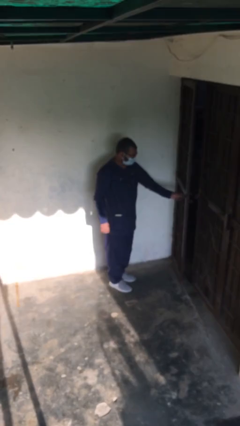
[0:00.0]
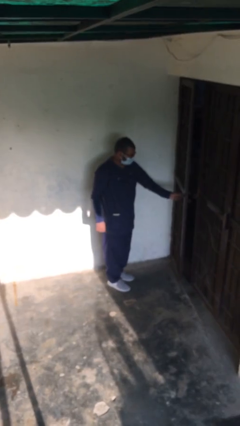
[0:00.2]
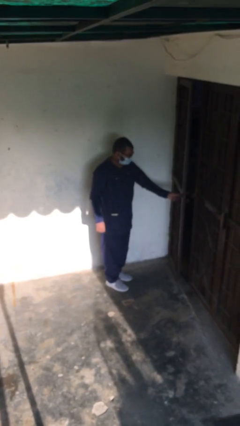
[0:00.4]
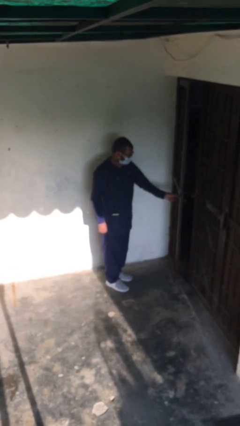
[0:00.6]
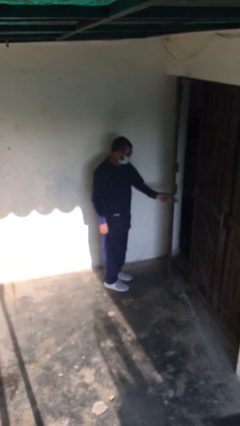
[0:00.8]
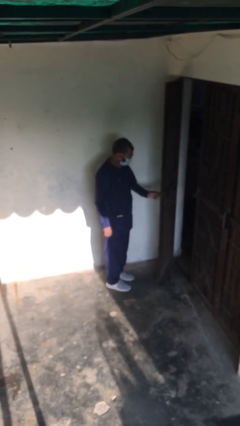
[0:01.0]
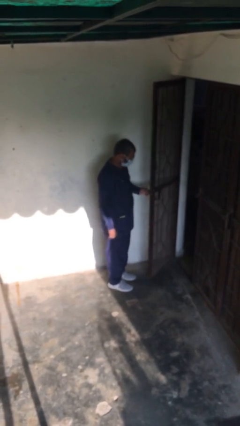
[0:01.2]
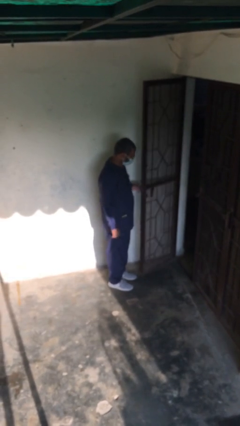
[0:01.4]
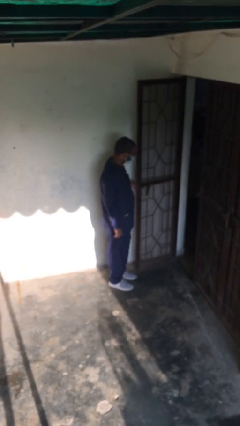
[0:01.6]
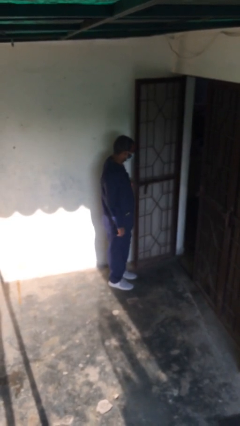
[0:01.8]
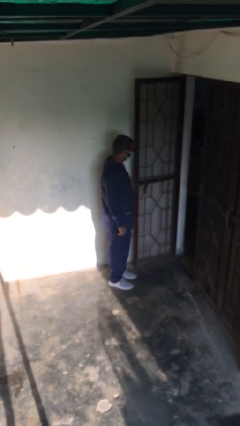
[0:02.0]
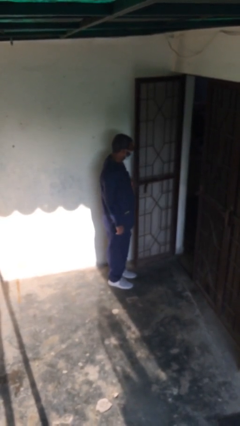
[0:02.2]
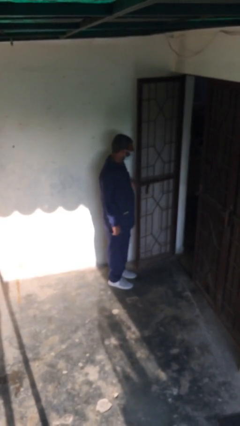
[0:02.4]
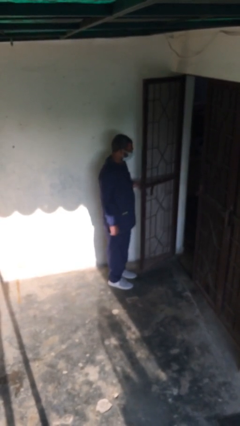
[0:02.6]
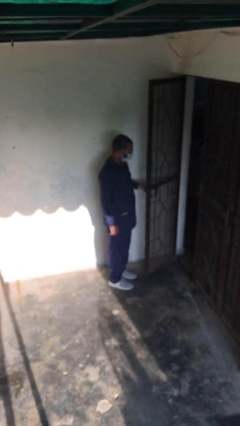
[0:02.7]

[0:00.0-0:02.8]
person opens facility door

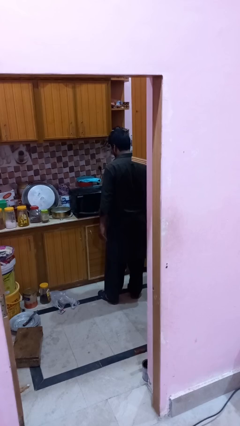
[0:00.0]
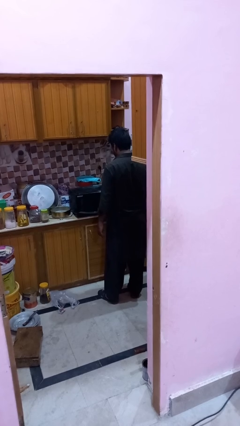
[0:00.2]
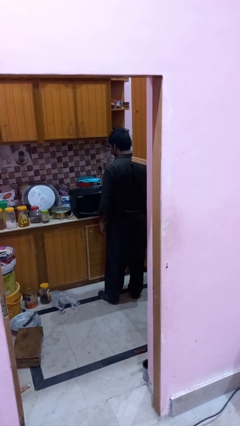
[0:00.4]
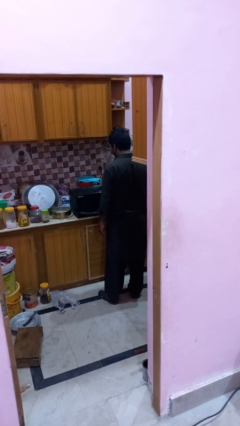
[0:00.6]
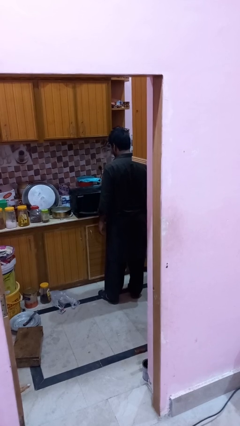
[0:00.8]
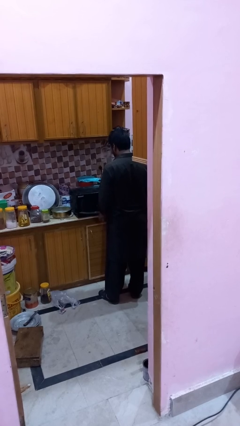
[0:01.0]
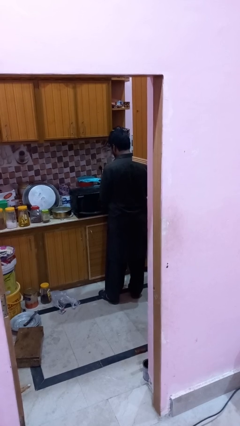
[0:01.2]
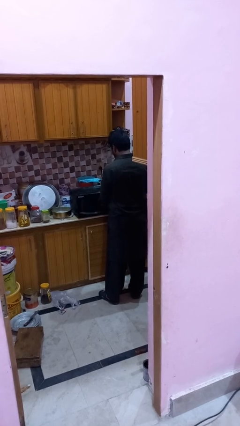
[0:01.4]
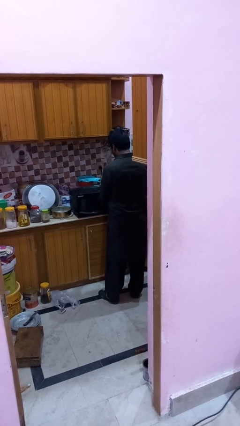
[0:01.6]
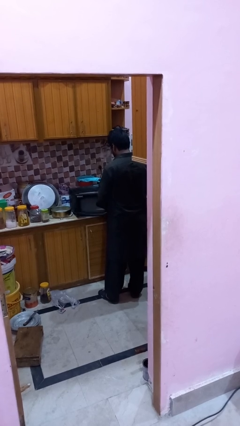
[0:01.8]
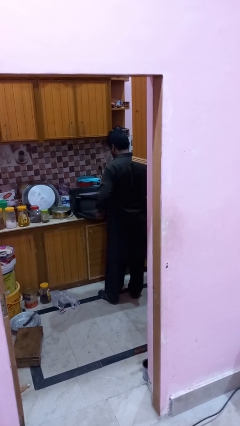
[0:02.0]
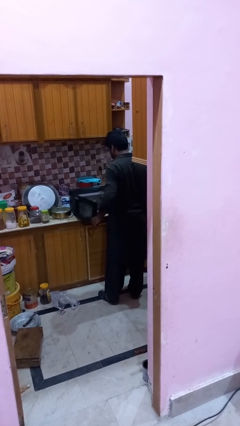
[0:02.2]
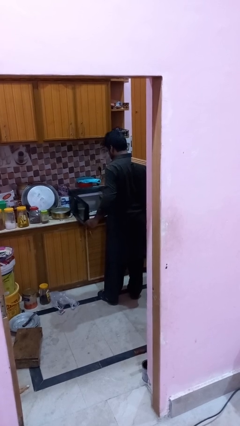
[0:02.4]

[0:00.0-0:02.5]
person opens oven door

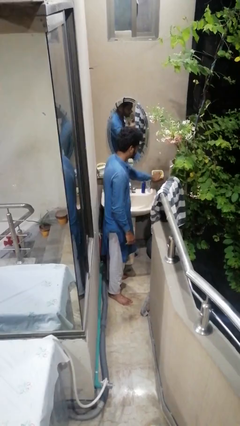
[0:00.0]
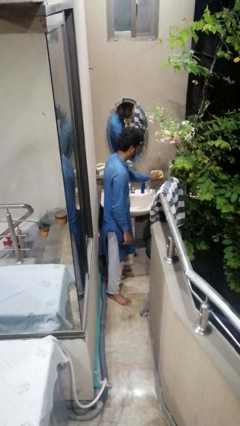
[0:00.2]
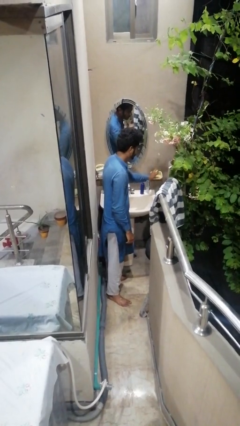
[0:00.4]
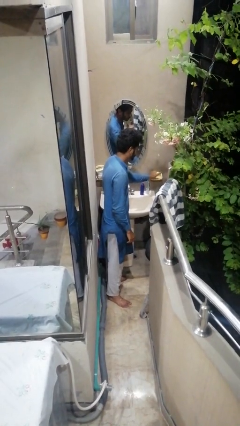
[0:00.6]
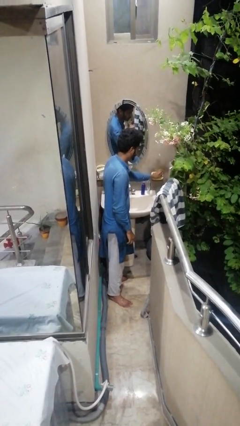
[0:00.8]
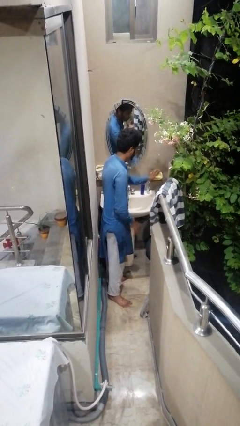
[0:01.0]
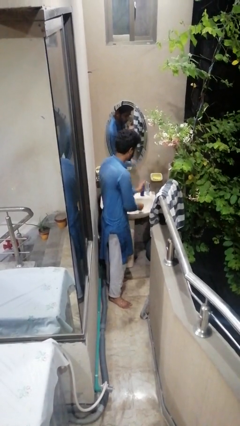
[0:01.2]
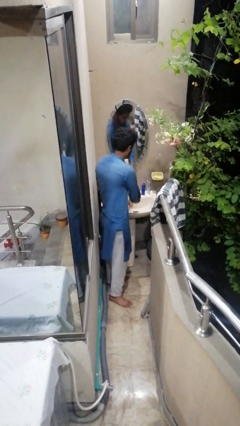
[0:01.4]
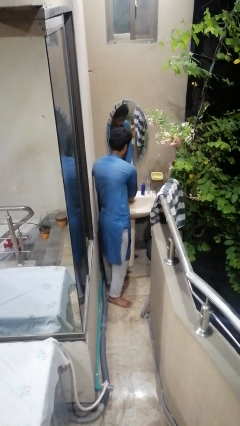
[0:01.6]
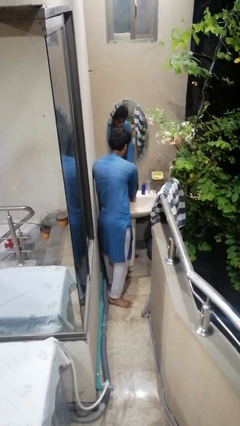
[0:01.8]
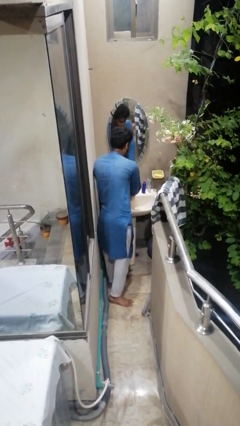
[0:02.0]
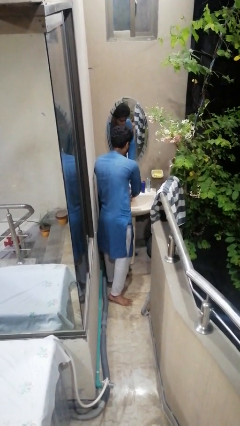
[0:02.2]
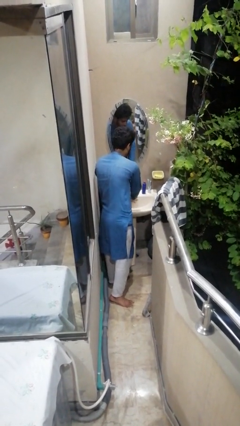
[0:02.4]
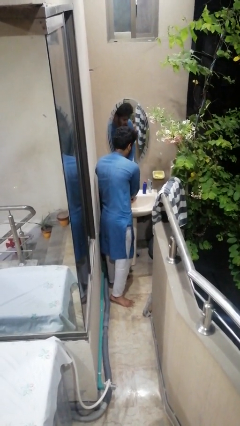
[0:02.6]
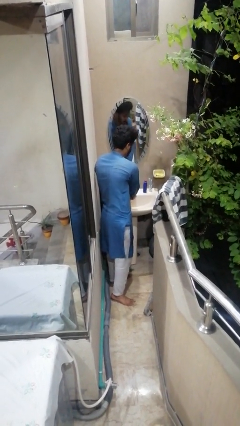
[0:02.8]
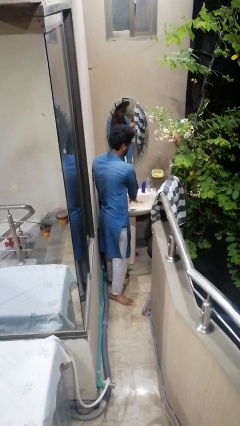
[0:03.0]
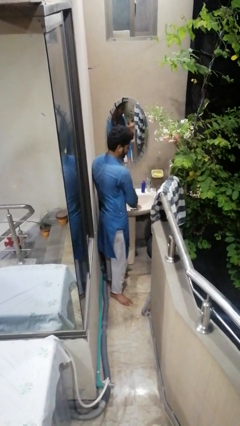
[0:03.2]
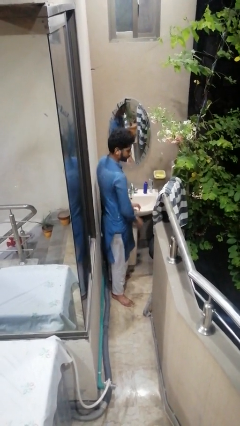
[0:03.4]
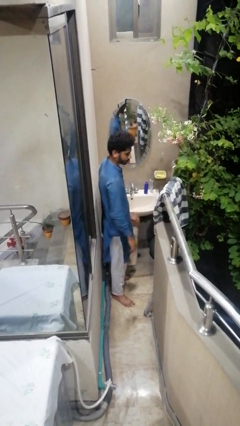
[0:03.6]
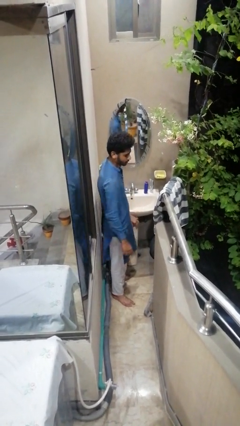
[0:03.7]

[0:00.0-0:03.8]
person washes hands

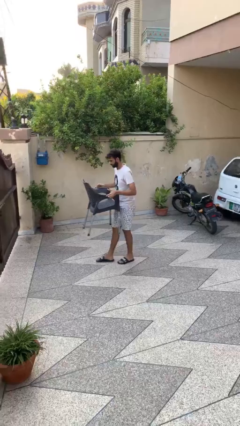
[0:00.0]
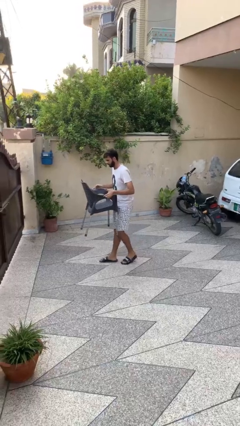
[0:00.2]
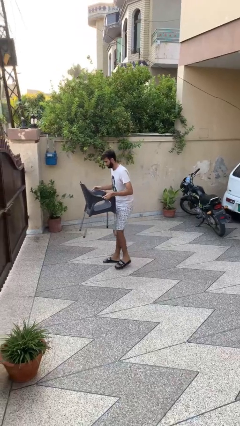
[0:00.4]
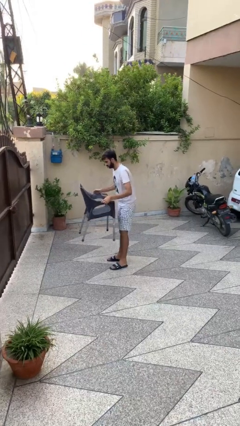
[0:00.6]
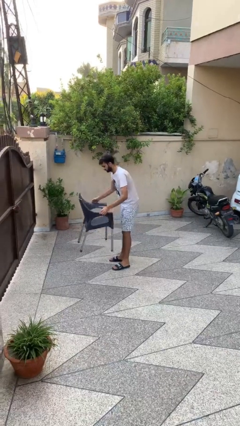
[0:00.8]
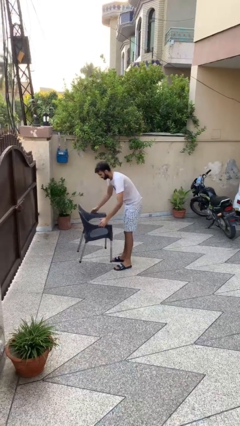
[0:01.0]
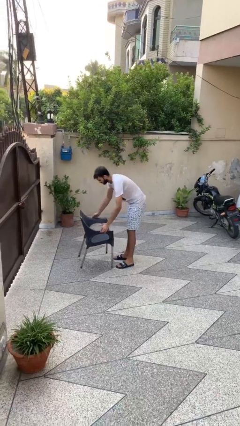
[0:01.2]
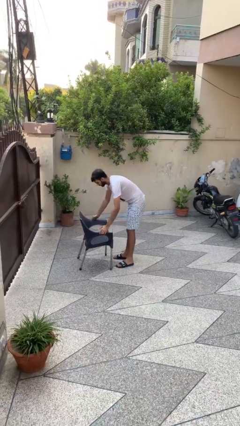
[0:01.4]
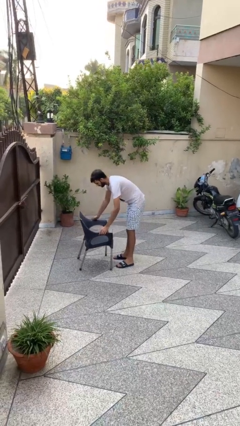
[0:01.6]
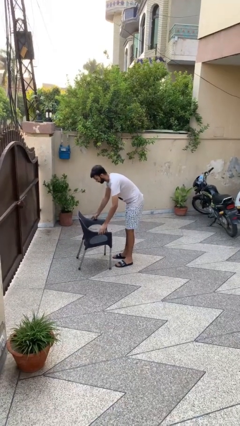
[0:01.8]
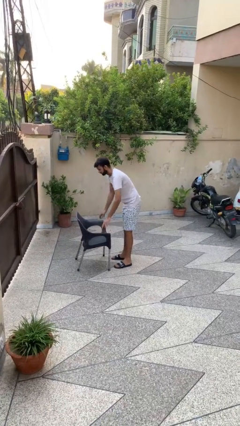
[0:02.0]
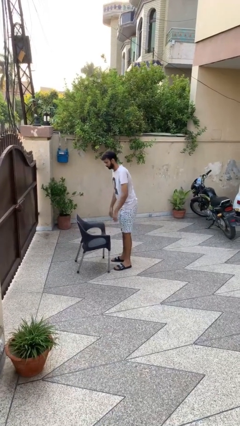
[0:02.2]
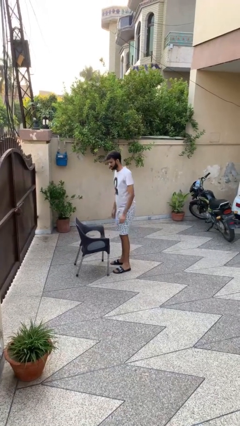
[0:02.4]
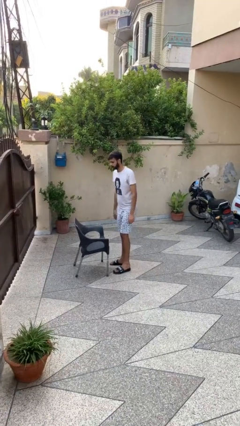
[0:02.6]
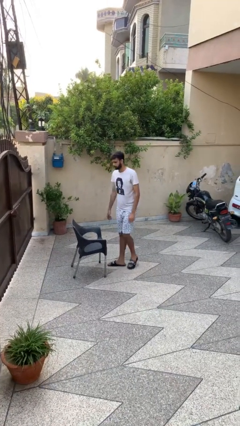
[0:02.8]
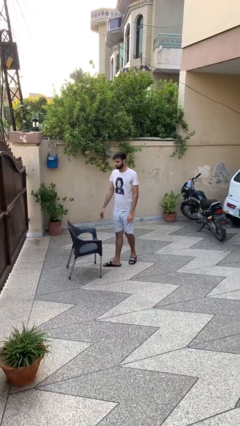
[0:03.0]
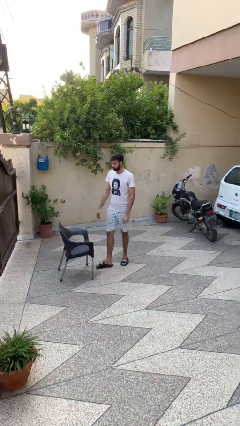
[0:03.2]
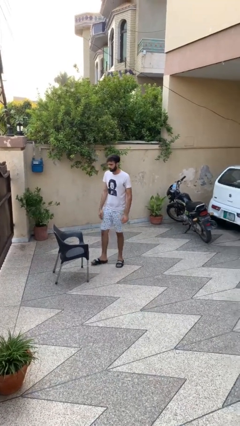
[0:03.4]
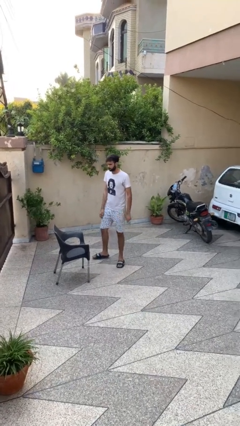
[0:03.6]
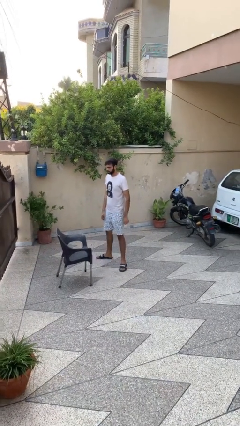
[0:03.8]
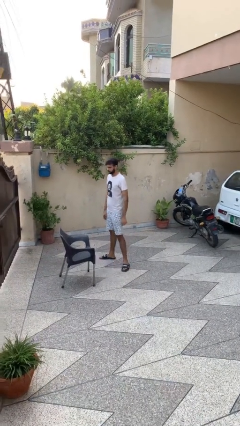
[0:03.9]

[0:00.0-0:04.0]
person puts down object on floor

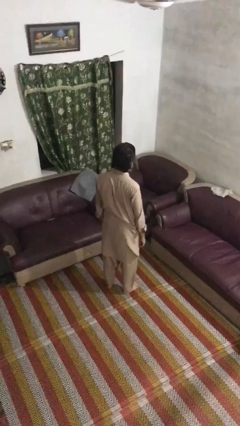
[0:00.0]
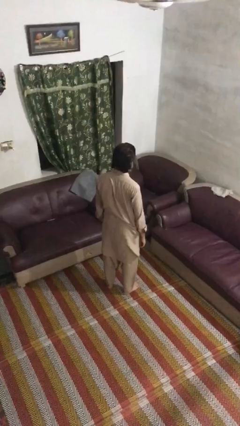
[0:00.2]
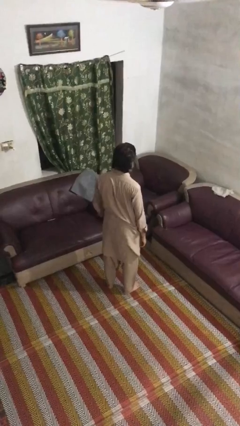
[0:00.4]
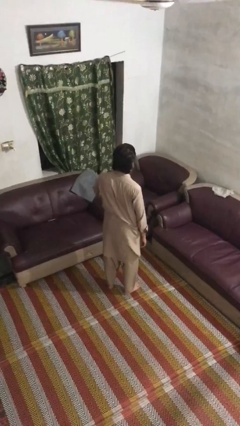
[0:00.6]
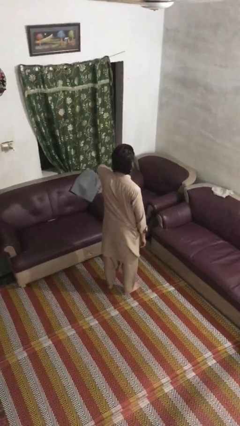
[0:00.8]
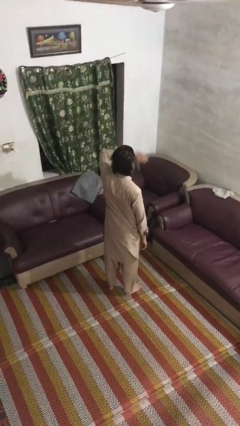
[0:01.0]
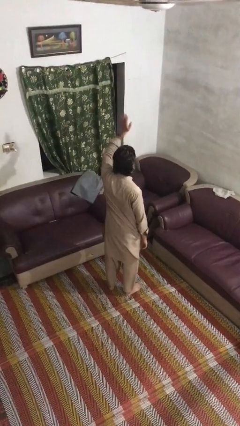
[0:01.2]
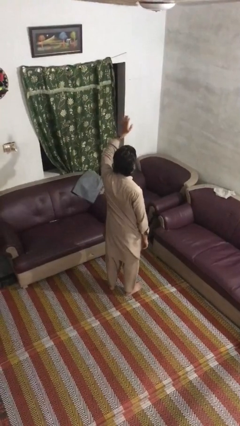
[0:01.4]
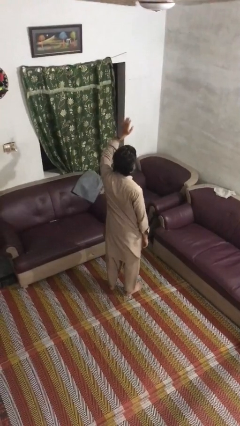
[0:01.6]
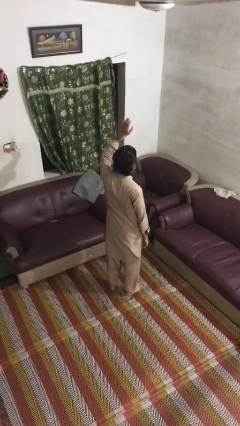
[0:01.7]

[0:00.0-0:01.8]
person gestures swipe up

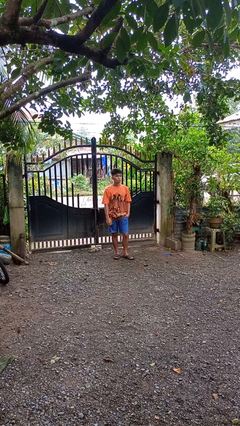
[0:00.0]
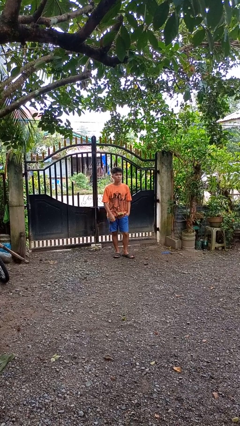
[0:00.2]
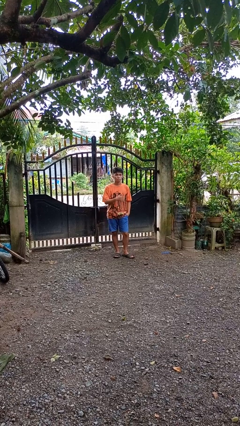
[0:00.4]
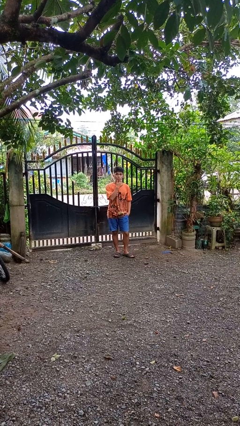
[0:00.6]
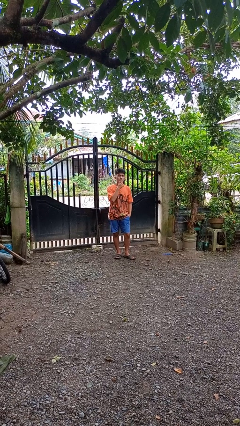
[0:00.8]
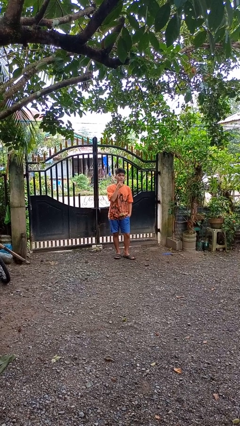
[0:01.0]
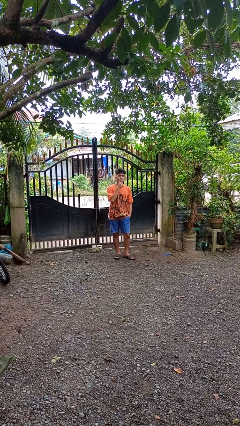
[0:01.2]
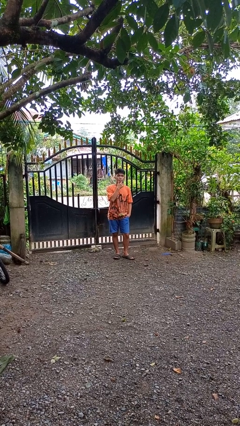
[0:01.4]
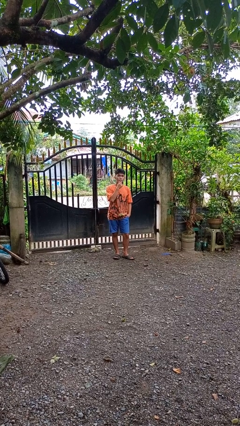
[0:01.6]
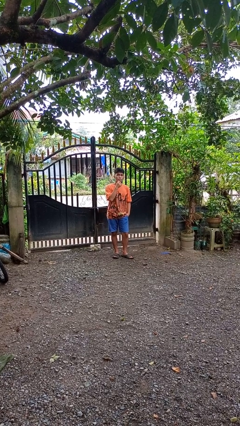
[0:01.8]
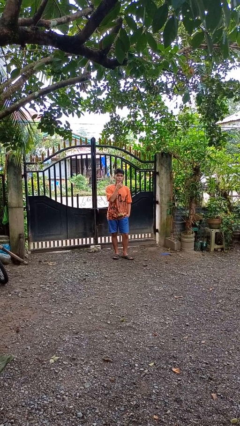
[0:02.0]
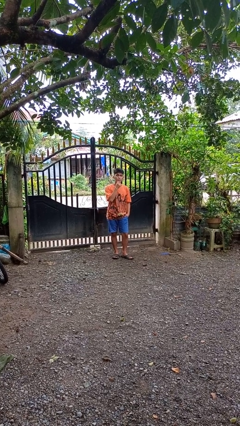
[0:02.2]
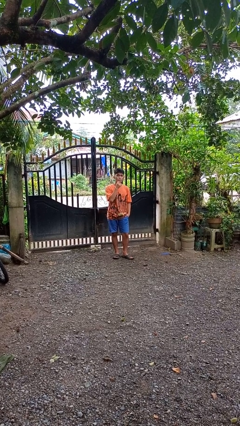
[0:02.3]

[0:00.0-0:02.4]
person strokes chin
